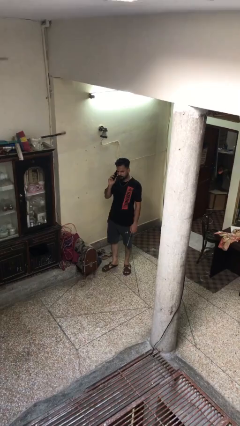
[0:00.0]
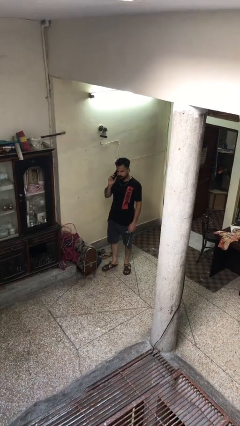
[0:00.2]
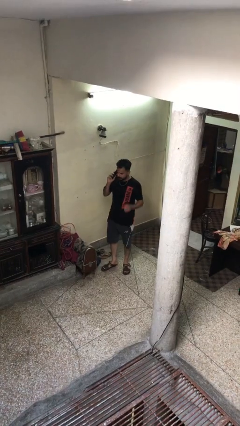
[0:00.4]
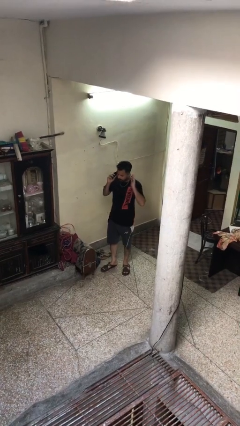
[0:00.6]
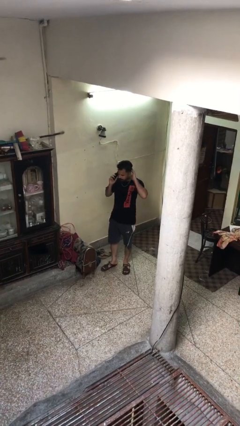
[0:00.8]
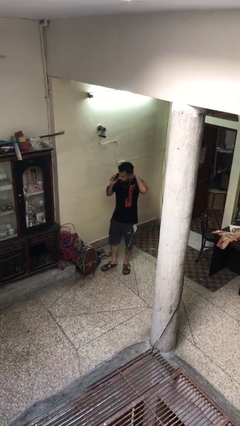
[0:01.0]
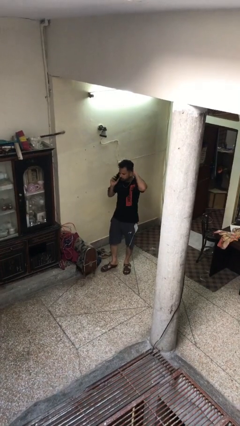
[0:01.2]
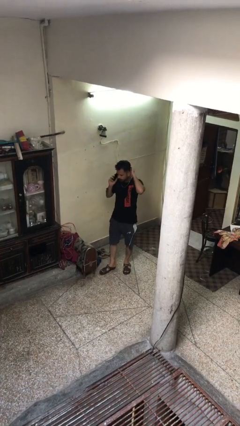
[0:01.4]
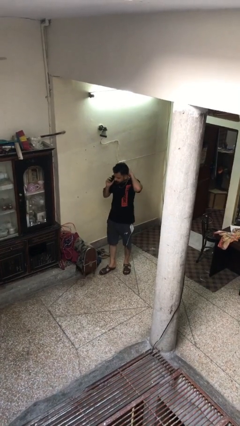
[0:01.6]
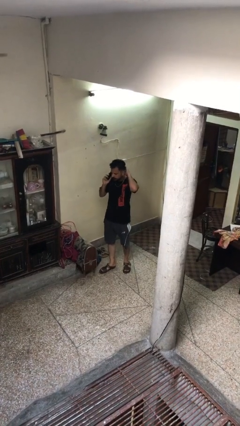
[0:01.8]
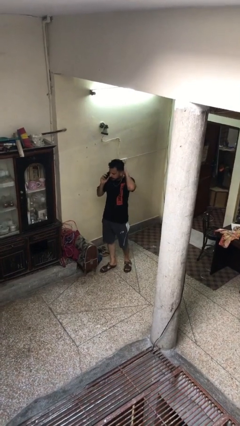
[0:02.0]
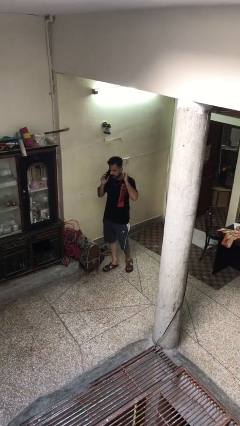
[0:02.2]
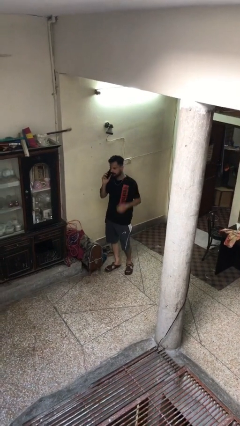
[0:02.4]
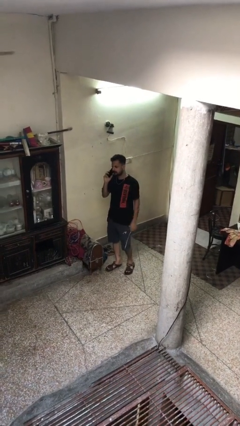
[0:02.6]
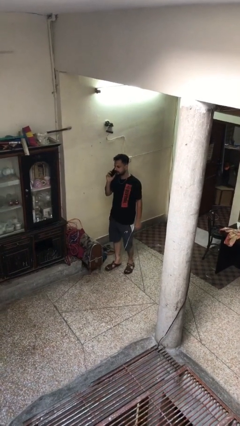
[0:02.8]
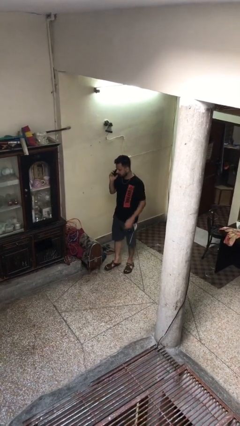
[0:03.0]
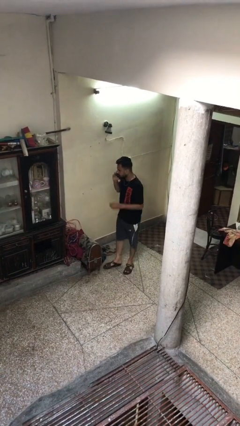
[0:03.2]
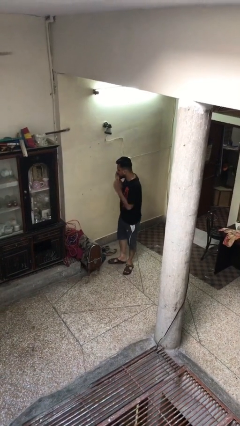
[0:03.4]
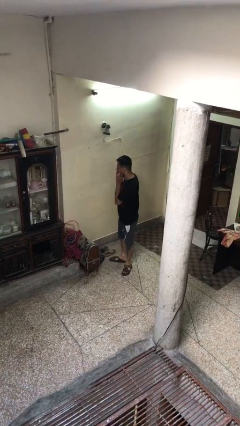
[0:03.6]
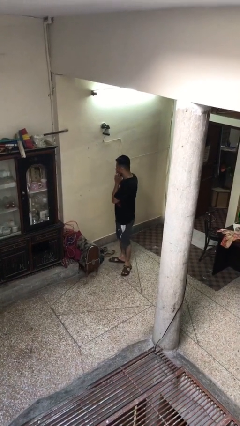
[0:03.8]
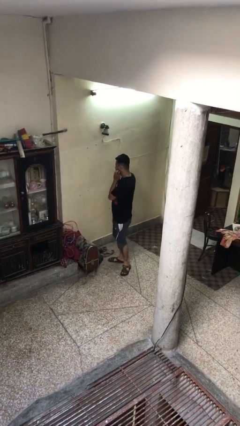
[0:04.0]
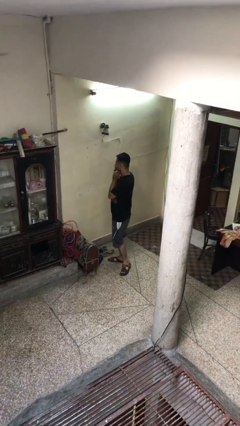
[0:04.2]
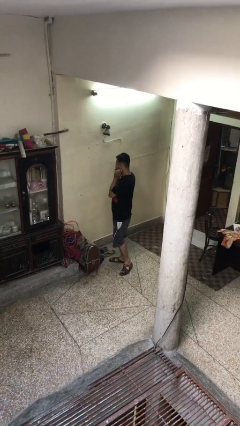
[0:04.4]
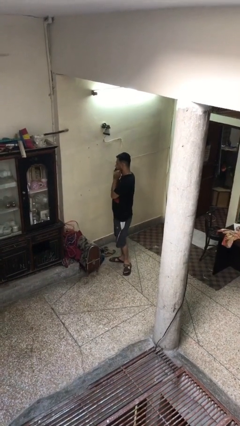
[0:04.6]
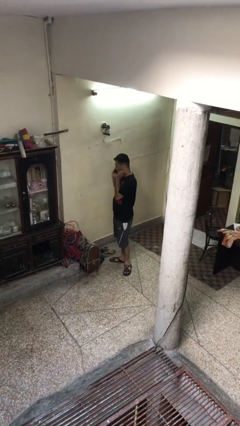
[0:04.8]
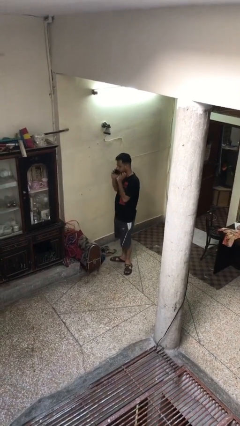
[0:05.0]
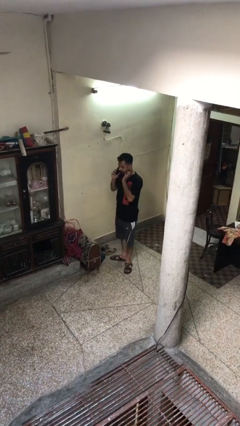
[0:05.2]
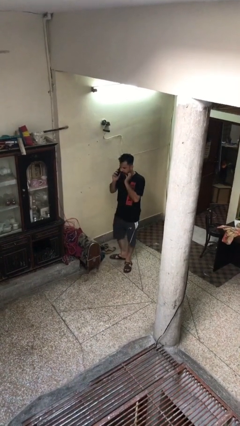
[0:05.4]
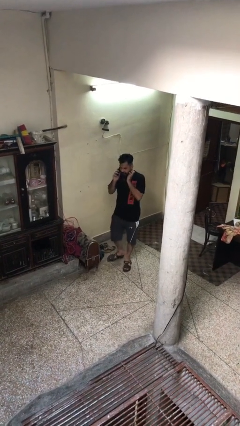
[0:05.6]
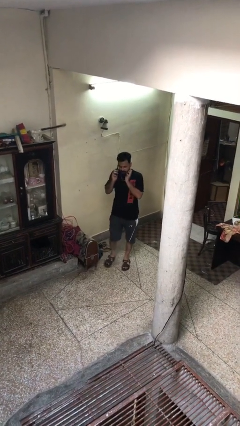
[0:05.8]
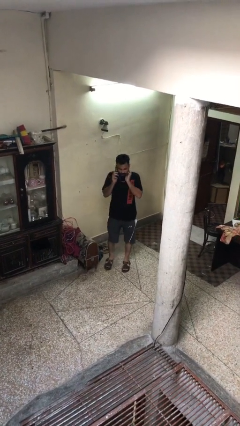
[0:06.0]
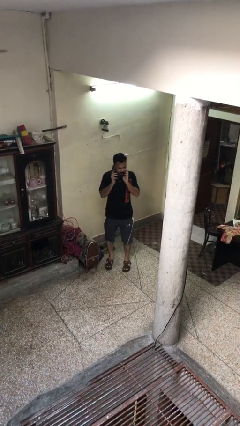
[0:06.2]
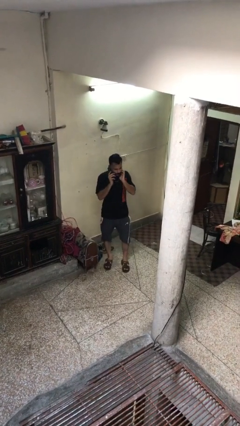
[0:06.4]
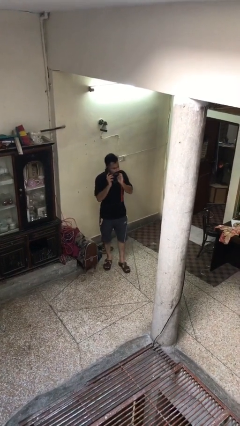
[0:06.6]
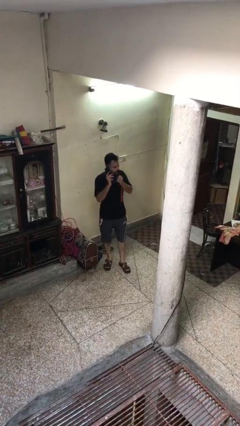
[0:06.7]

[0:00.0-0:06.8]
person talks on phone

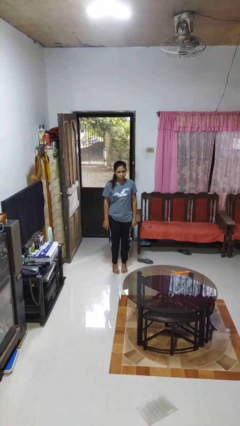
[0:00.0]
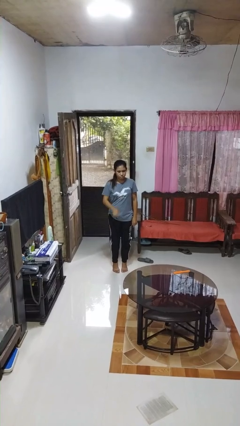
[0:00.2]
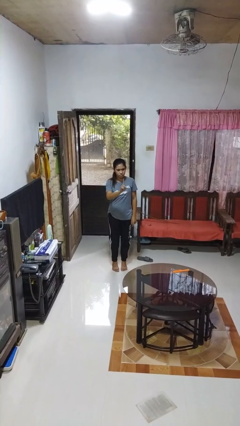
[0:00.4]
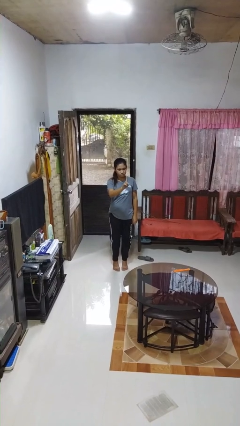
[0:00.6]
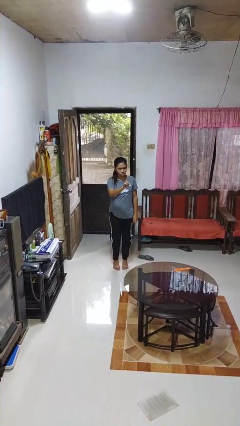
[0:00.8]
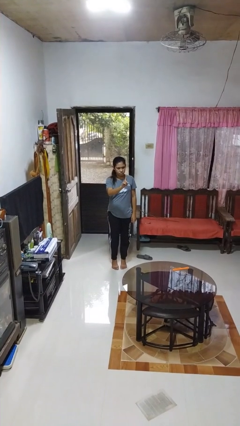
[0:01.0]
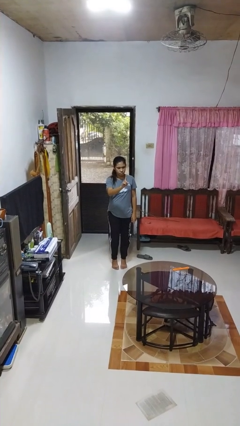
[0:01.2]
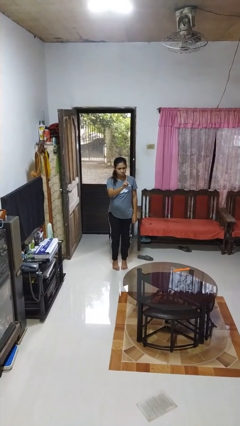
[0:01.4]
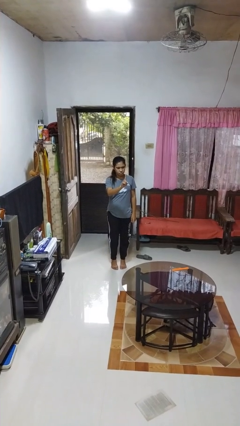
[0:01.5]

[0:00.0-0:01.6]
person gestures number one

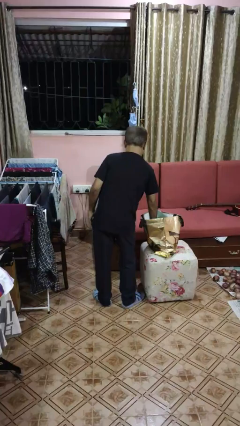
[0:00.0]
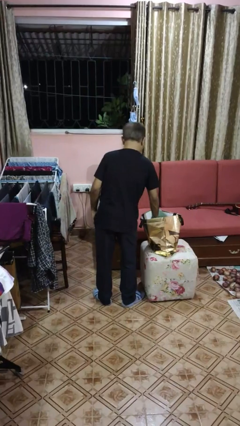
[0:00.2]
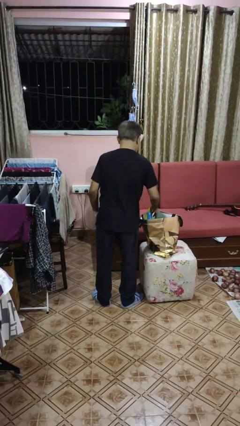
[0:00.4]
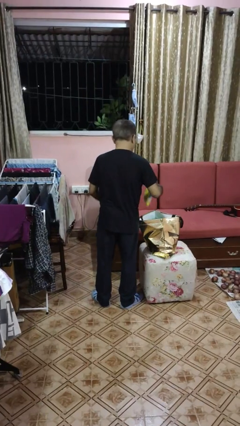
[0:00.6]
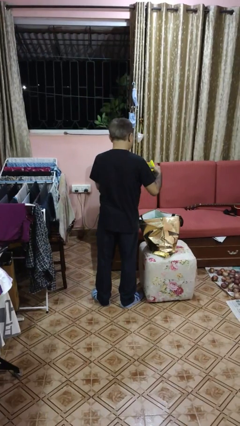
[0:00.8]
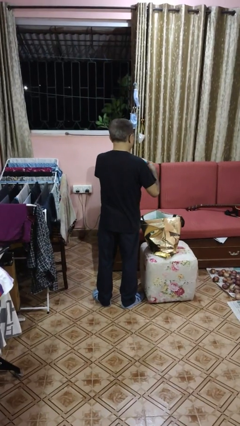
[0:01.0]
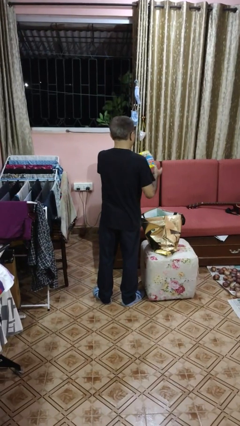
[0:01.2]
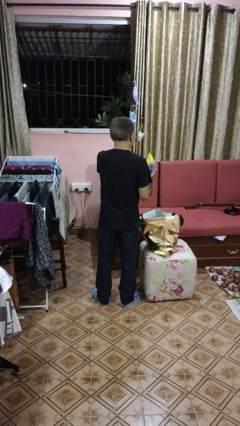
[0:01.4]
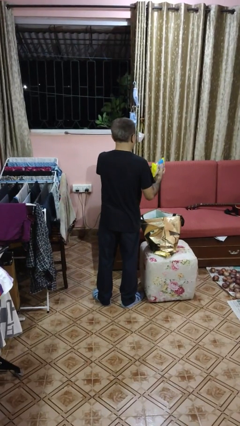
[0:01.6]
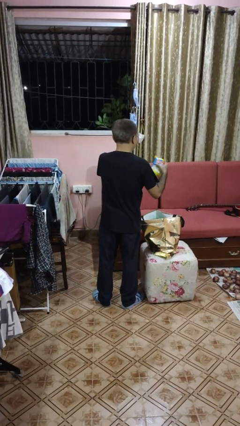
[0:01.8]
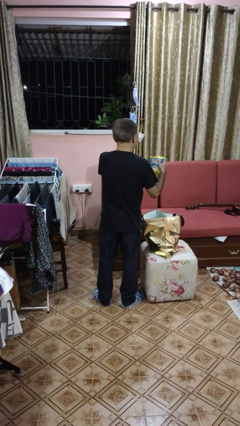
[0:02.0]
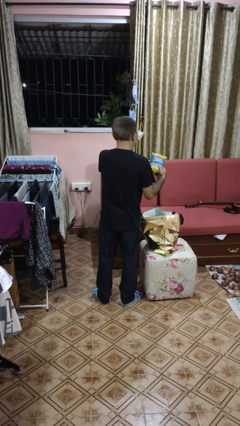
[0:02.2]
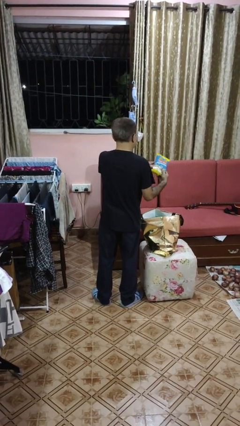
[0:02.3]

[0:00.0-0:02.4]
person takes object from bag

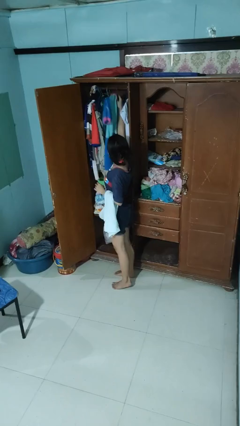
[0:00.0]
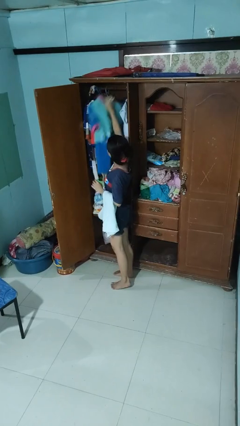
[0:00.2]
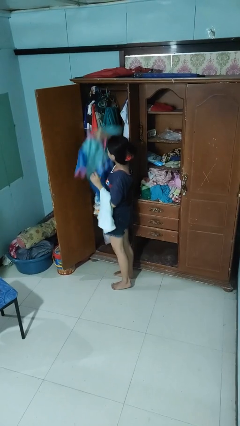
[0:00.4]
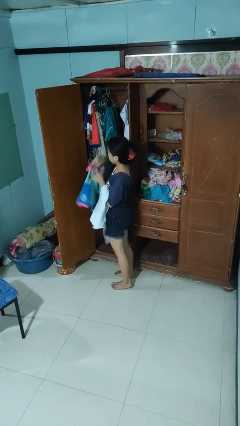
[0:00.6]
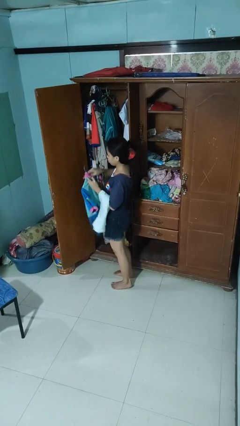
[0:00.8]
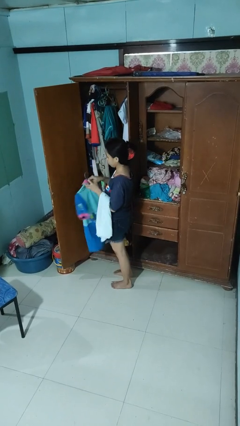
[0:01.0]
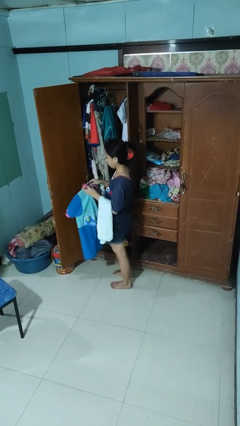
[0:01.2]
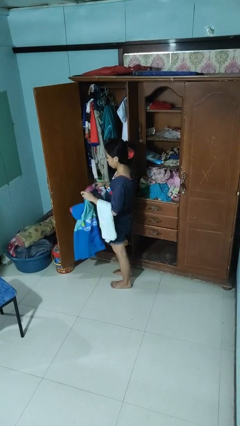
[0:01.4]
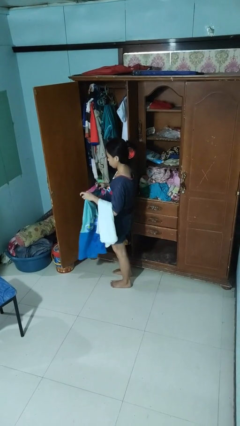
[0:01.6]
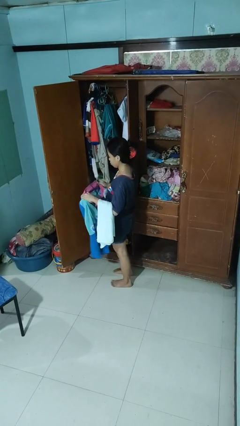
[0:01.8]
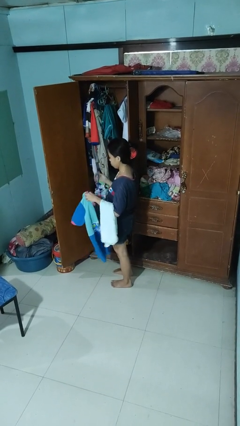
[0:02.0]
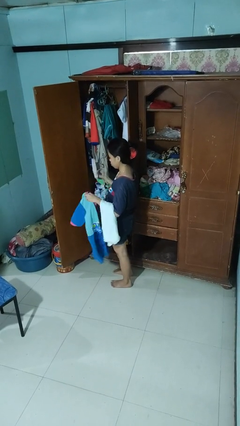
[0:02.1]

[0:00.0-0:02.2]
person takes clothes from closet

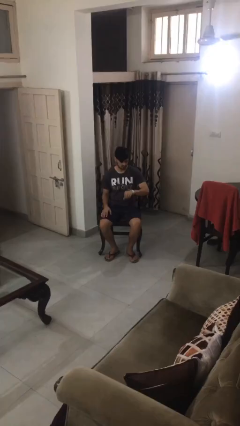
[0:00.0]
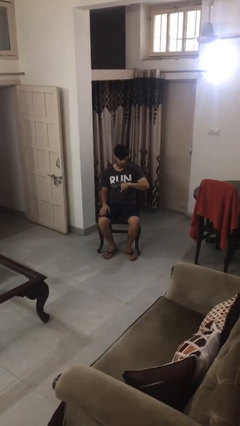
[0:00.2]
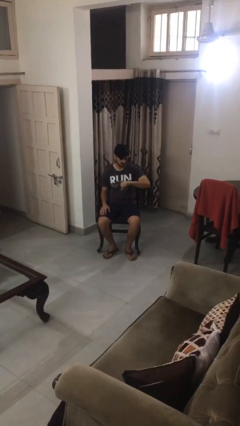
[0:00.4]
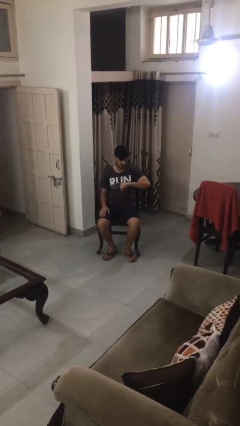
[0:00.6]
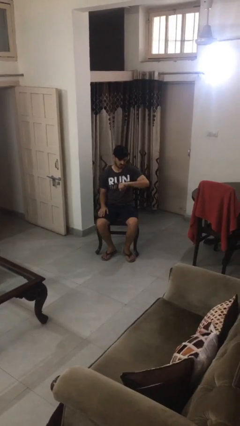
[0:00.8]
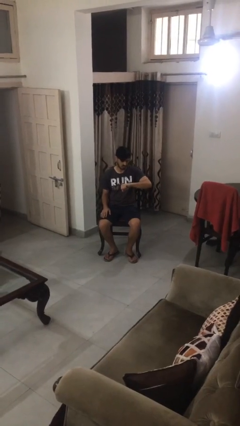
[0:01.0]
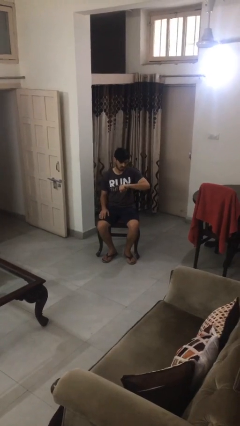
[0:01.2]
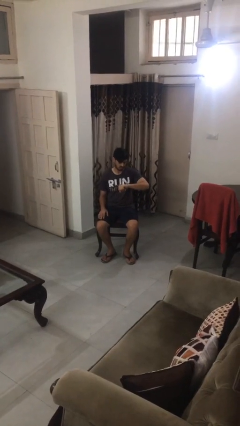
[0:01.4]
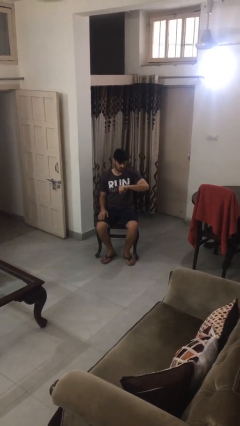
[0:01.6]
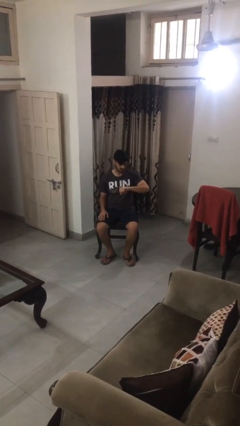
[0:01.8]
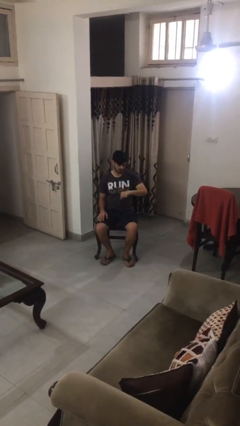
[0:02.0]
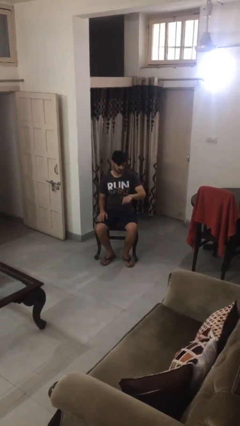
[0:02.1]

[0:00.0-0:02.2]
person looks at wristwatch

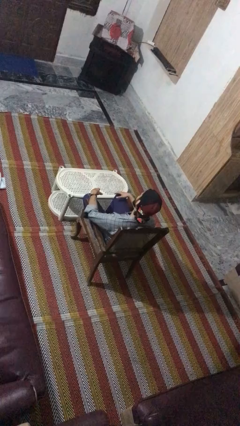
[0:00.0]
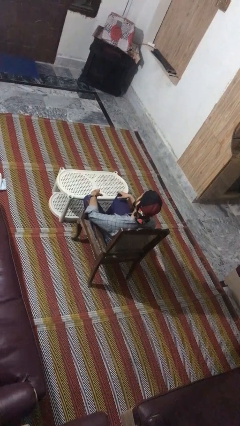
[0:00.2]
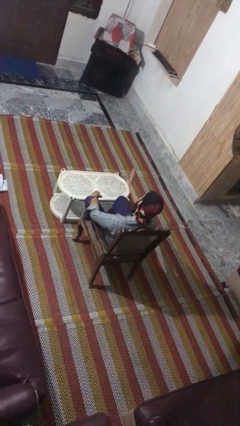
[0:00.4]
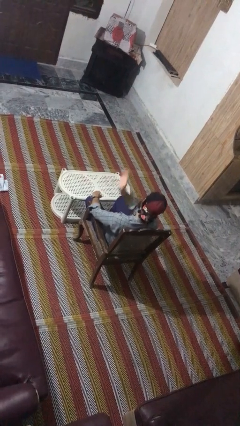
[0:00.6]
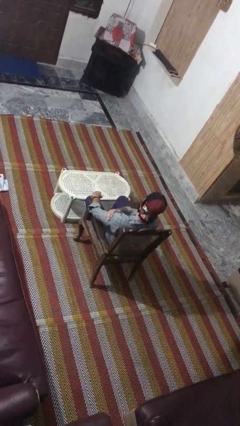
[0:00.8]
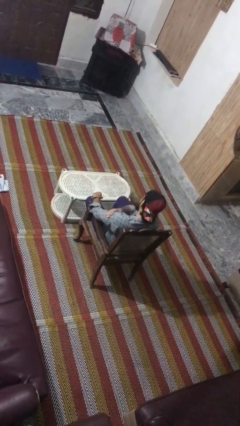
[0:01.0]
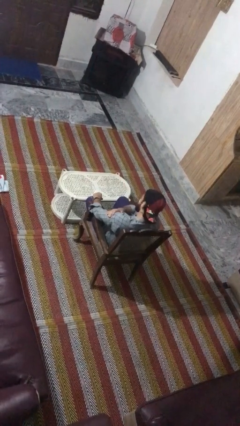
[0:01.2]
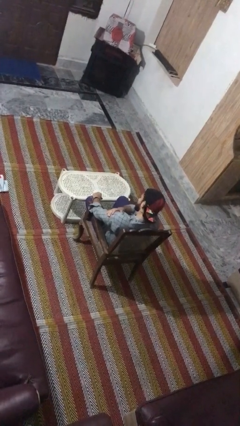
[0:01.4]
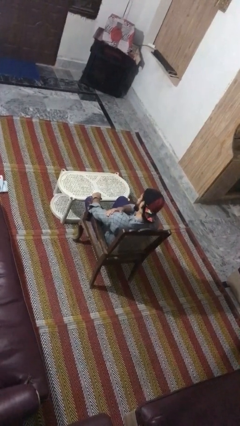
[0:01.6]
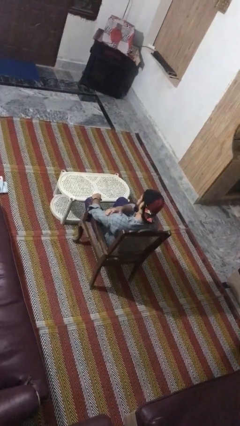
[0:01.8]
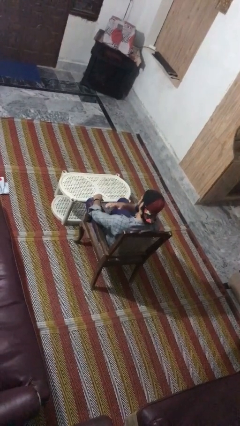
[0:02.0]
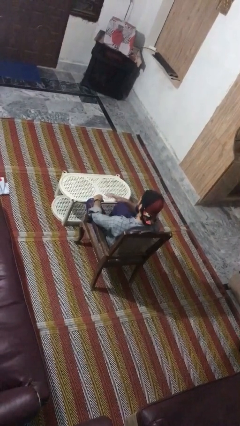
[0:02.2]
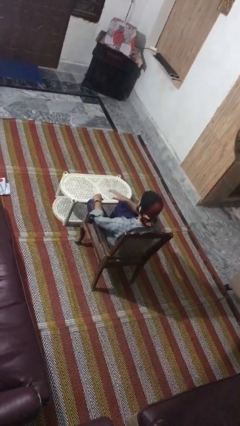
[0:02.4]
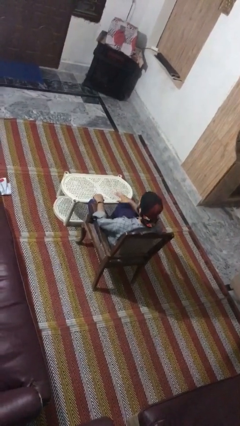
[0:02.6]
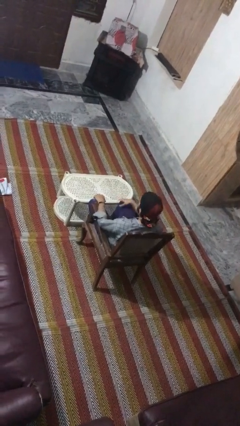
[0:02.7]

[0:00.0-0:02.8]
person swats bug
